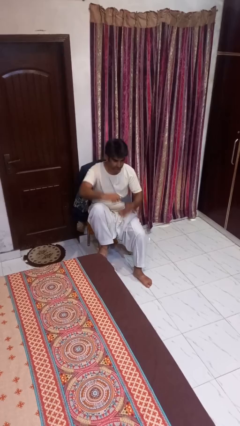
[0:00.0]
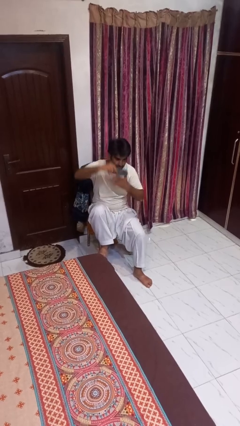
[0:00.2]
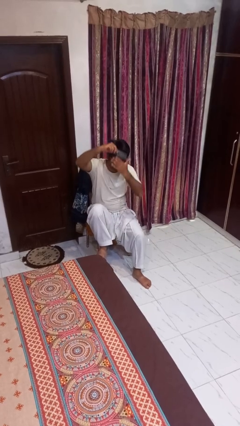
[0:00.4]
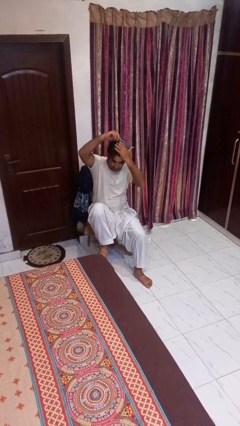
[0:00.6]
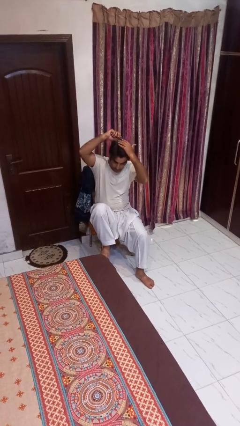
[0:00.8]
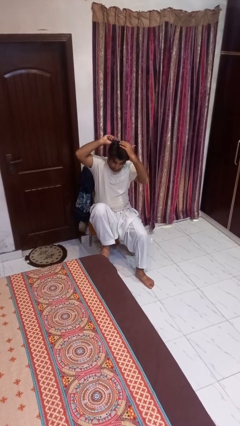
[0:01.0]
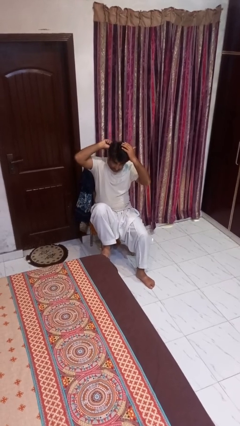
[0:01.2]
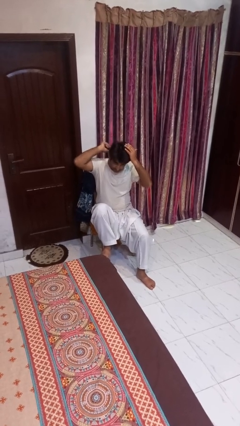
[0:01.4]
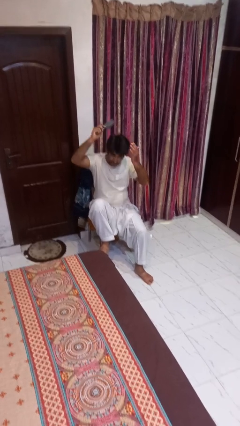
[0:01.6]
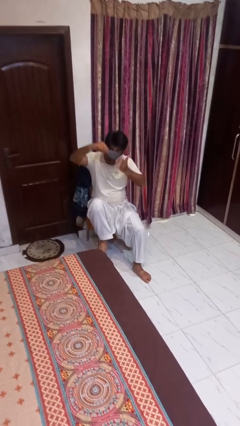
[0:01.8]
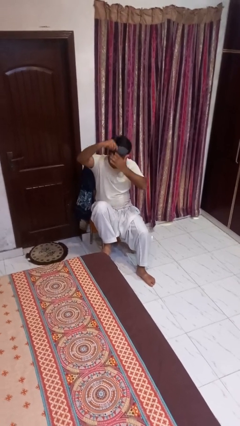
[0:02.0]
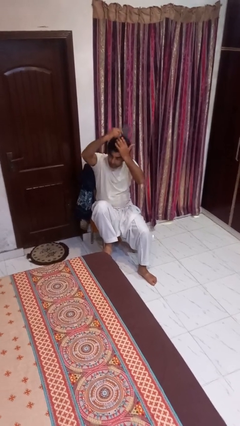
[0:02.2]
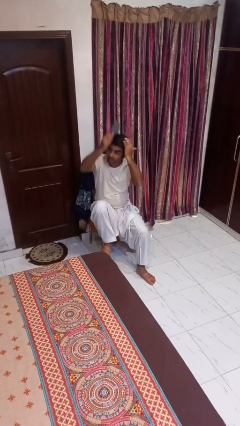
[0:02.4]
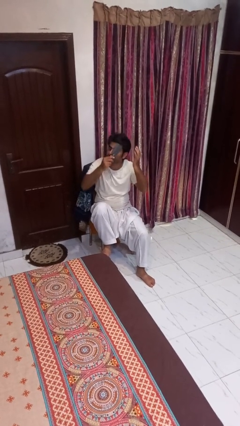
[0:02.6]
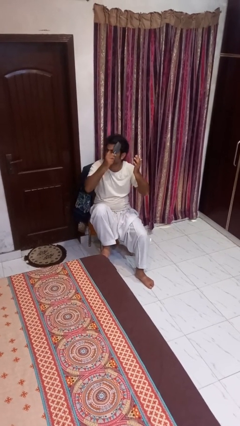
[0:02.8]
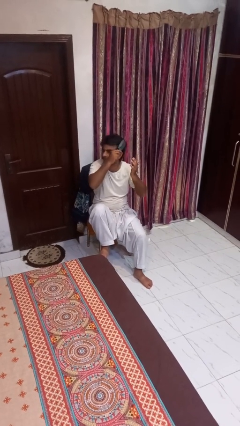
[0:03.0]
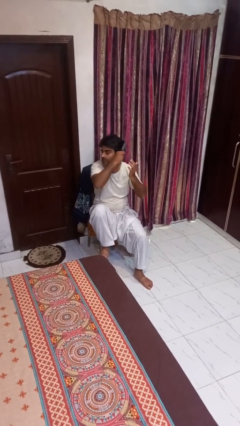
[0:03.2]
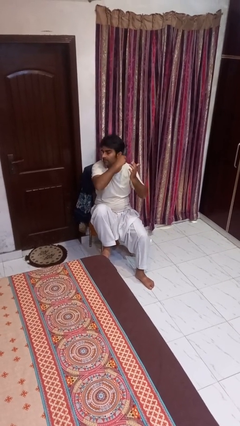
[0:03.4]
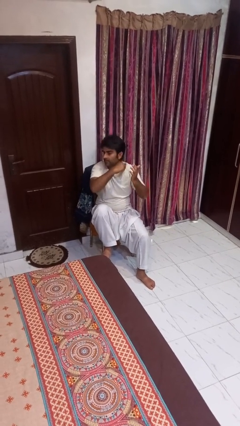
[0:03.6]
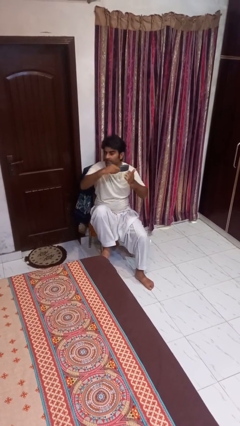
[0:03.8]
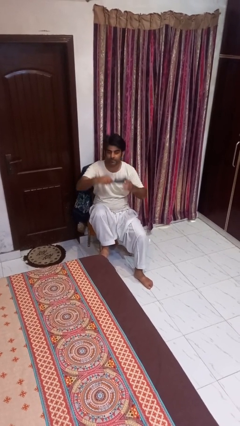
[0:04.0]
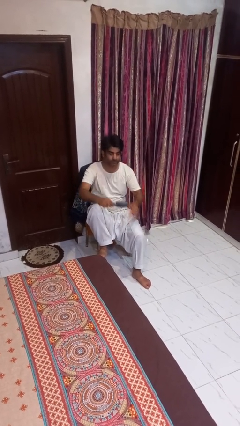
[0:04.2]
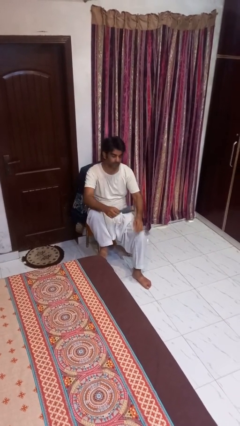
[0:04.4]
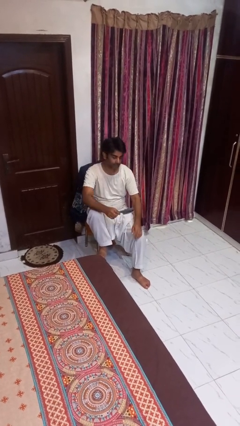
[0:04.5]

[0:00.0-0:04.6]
person brushes hair

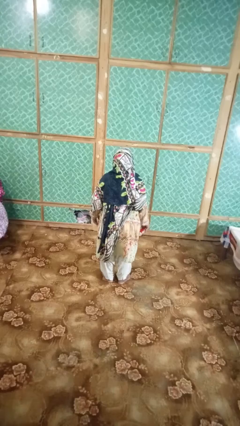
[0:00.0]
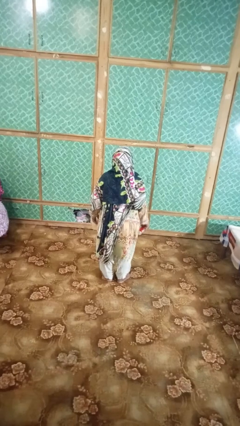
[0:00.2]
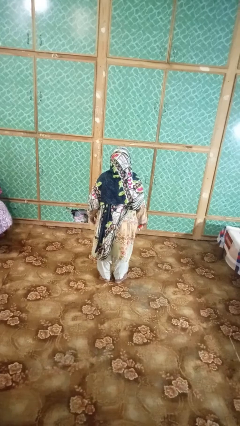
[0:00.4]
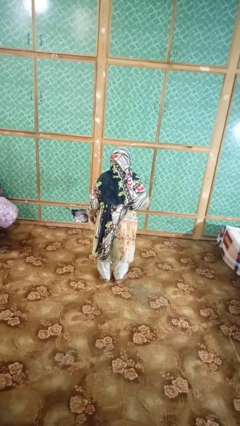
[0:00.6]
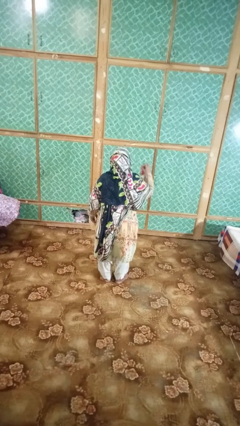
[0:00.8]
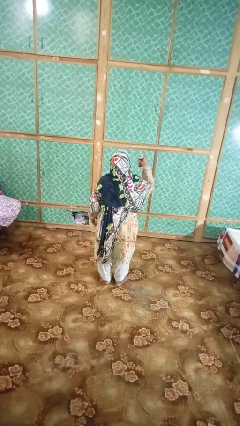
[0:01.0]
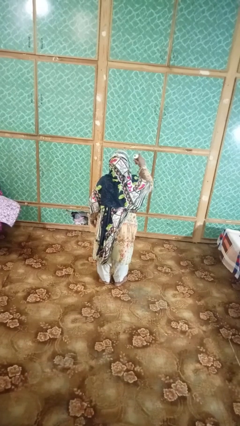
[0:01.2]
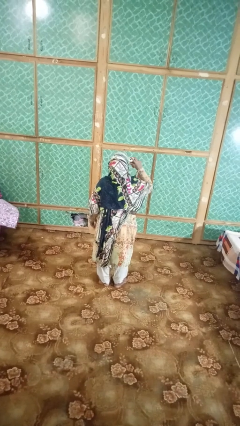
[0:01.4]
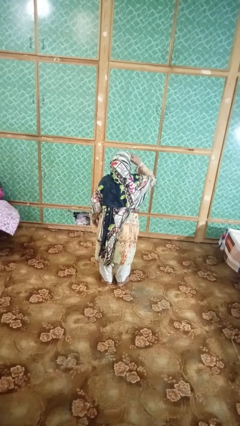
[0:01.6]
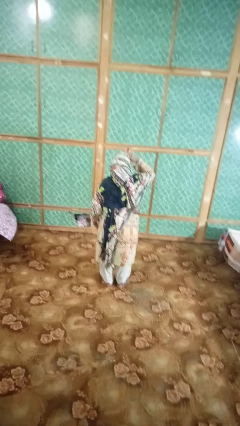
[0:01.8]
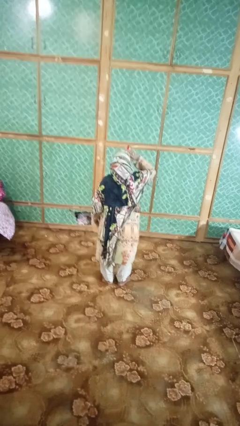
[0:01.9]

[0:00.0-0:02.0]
person opens beverage can

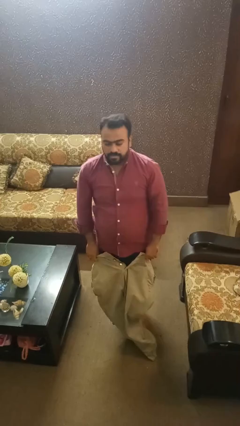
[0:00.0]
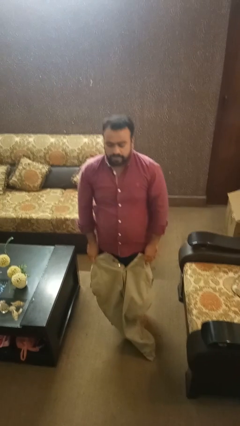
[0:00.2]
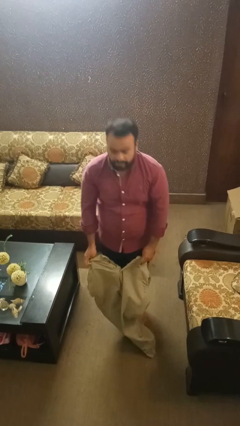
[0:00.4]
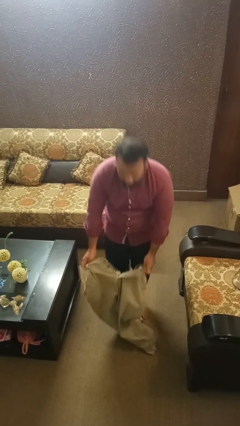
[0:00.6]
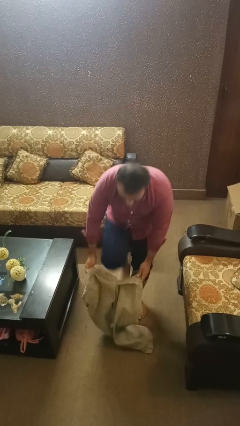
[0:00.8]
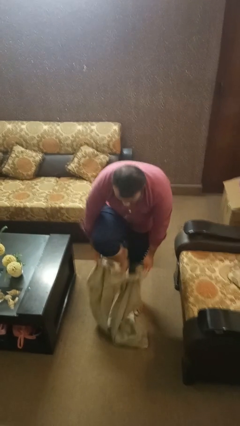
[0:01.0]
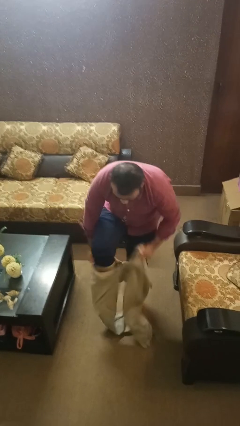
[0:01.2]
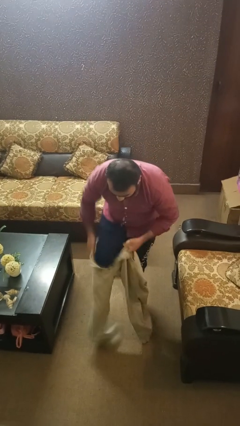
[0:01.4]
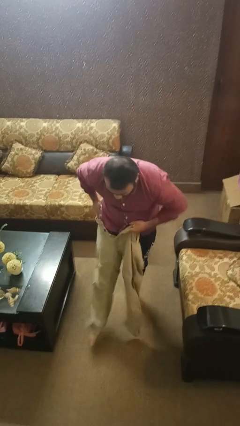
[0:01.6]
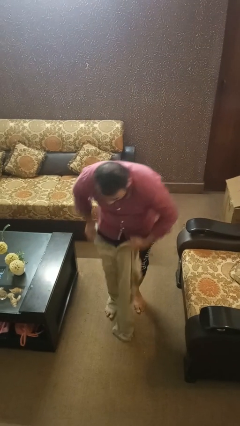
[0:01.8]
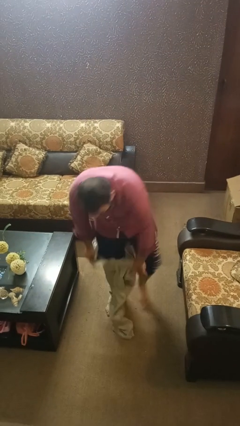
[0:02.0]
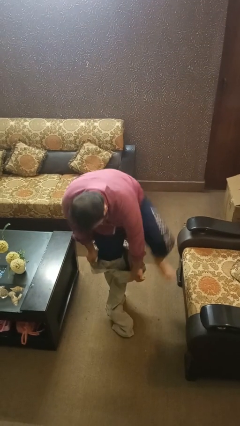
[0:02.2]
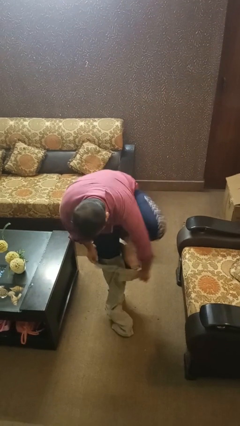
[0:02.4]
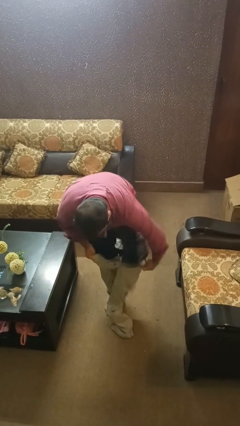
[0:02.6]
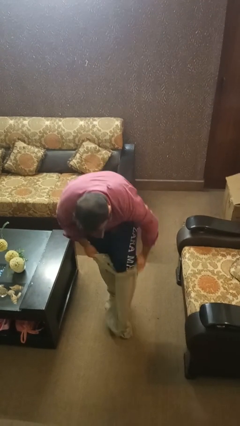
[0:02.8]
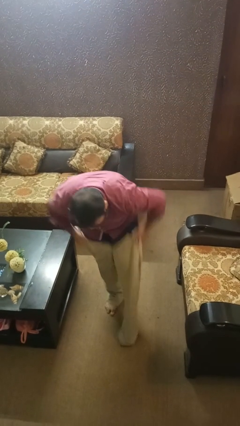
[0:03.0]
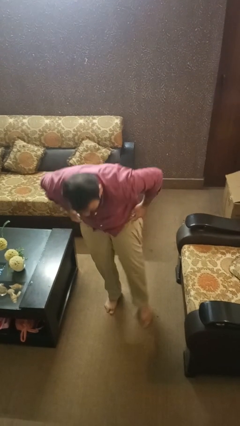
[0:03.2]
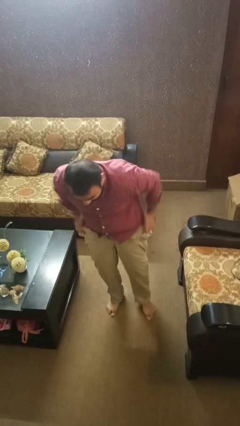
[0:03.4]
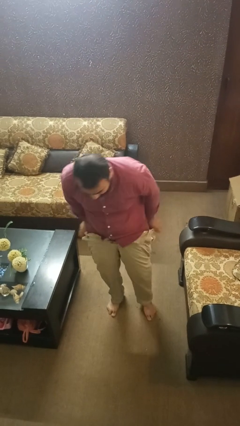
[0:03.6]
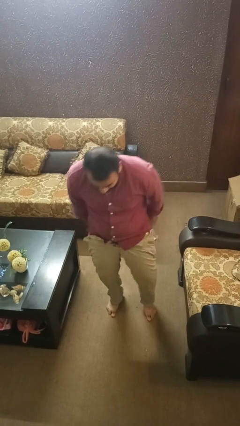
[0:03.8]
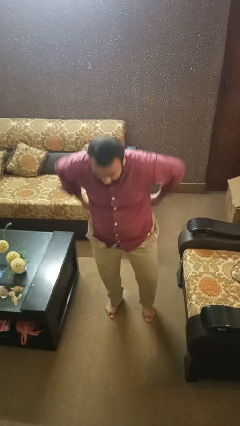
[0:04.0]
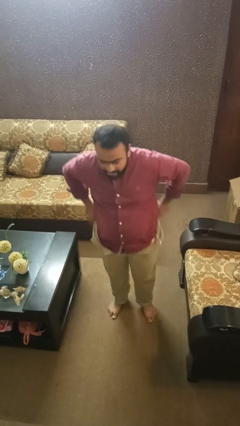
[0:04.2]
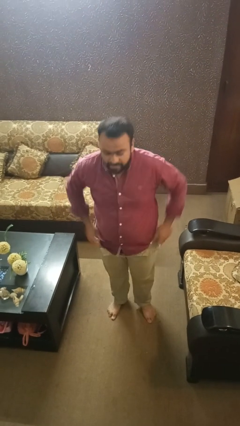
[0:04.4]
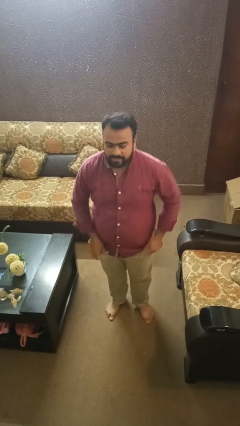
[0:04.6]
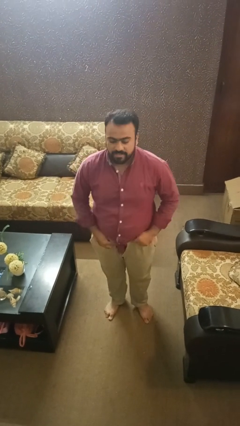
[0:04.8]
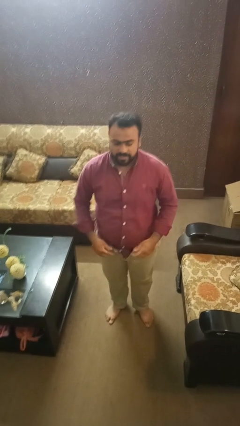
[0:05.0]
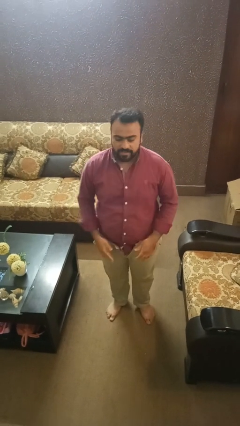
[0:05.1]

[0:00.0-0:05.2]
person puts on pants

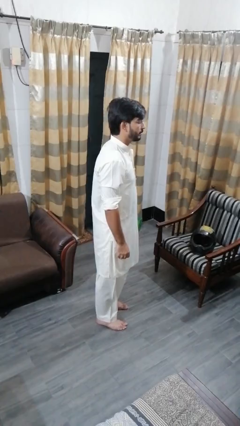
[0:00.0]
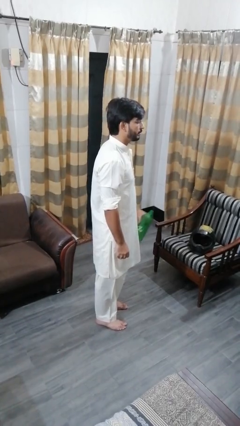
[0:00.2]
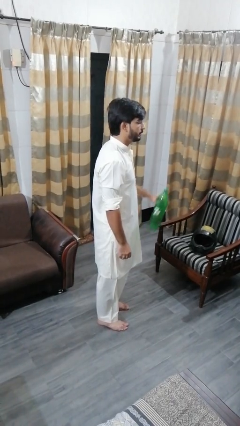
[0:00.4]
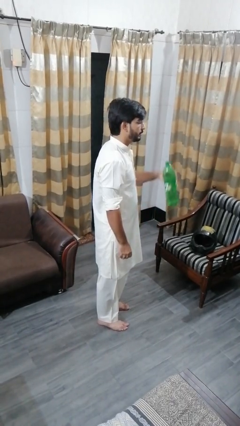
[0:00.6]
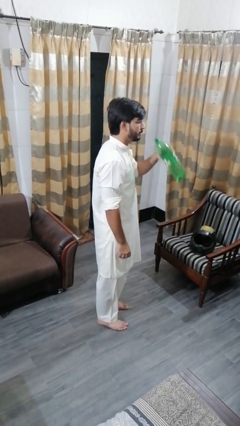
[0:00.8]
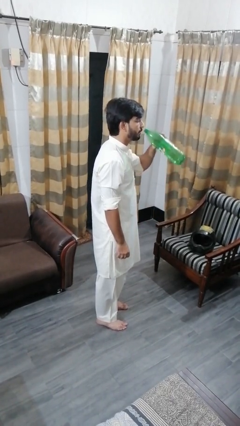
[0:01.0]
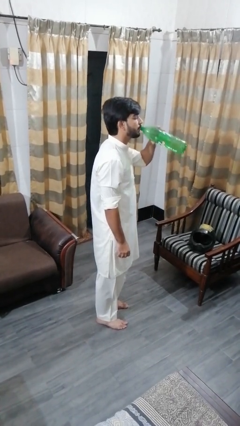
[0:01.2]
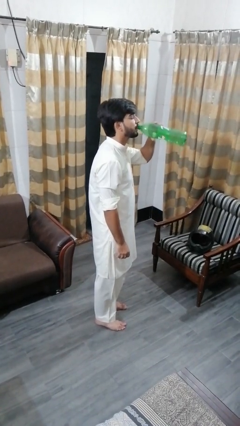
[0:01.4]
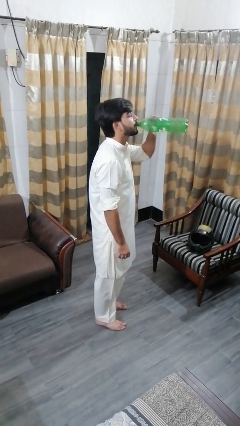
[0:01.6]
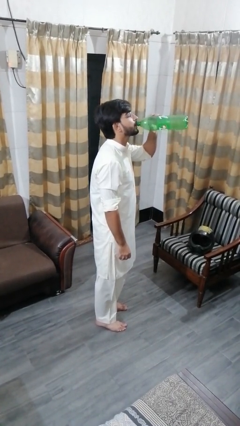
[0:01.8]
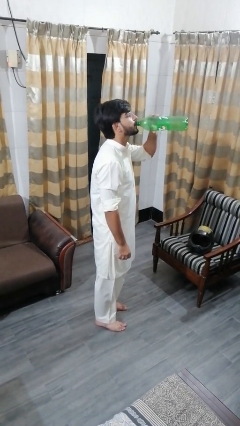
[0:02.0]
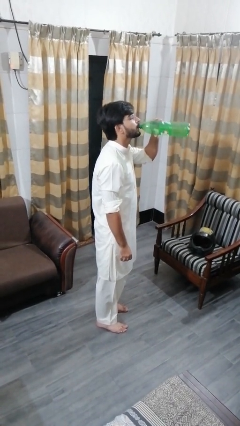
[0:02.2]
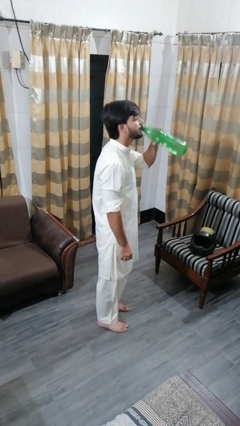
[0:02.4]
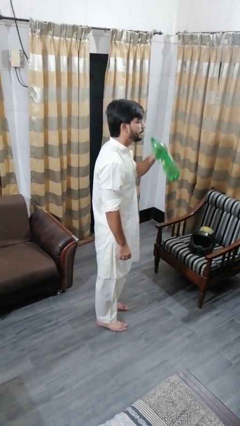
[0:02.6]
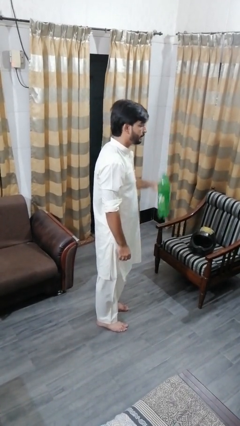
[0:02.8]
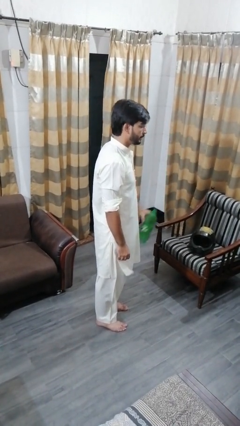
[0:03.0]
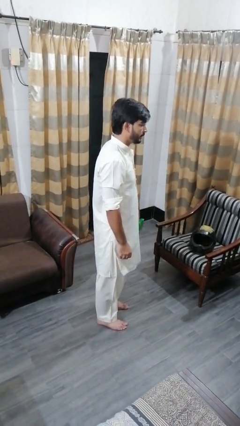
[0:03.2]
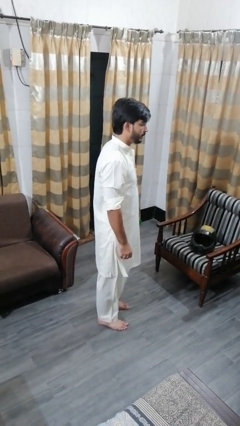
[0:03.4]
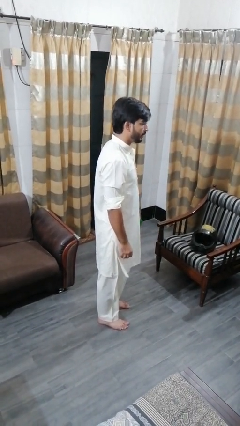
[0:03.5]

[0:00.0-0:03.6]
person drinks from bottle

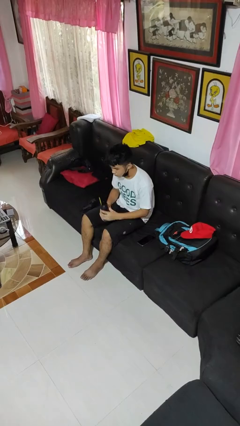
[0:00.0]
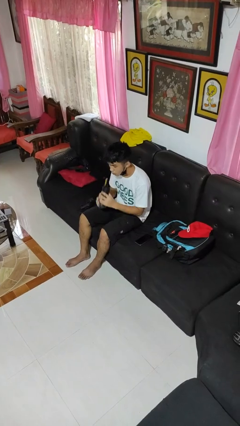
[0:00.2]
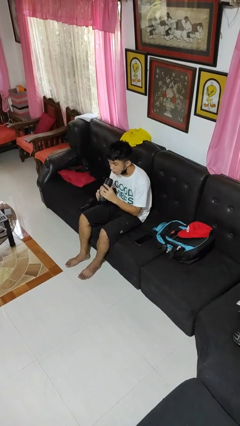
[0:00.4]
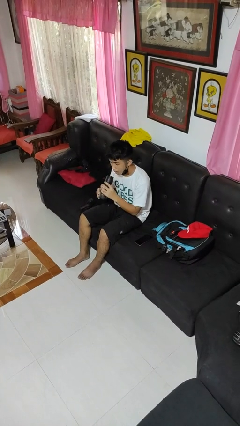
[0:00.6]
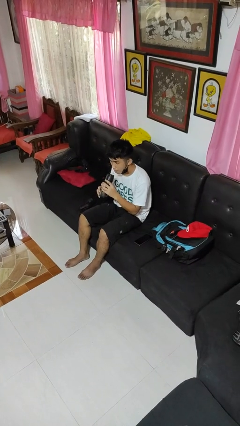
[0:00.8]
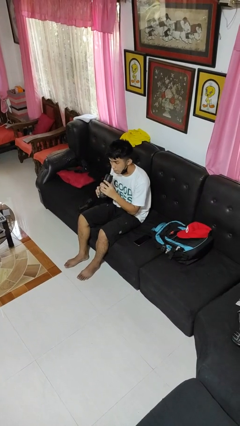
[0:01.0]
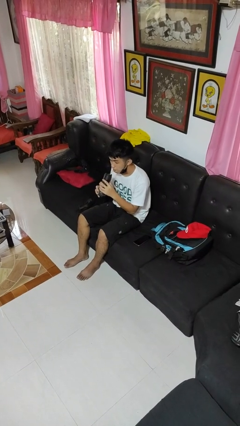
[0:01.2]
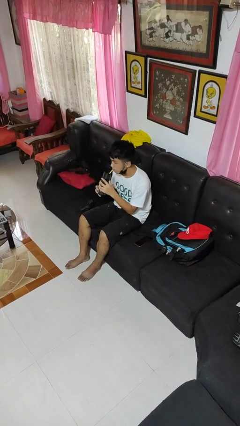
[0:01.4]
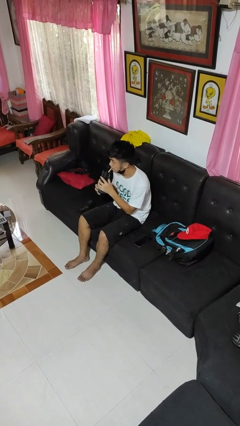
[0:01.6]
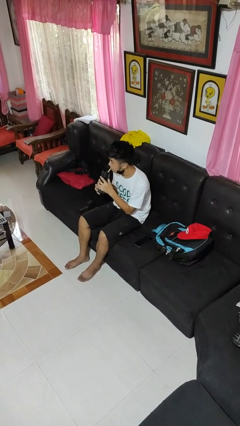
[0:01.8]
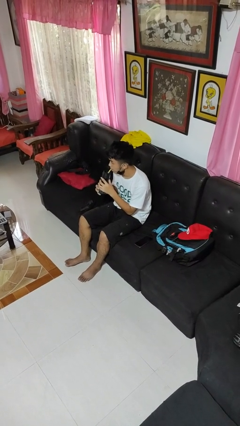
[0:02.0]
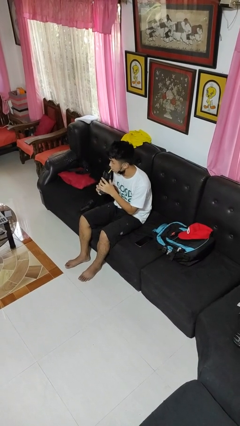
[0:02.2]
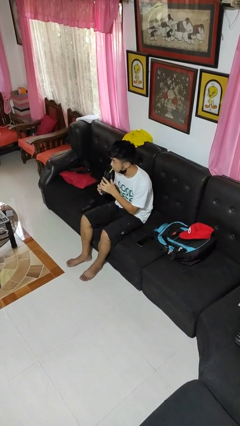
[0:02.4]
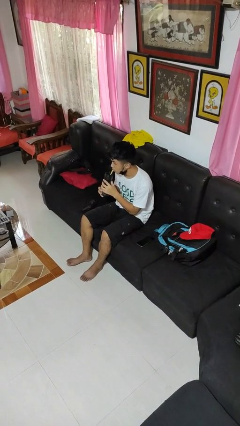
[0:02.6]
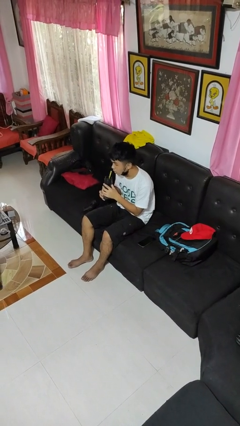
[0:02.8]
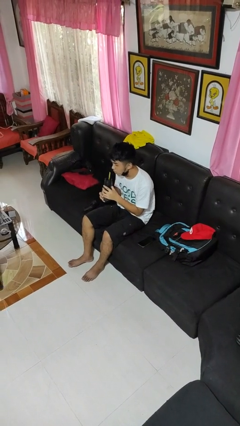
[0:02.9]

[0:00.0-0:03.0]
person drinks from straw
